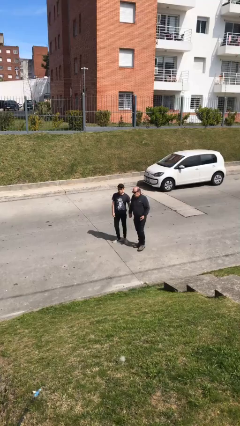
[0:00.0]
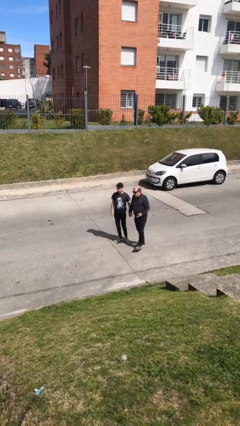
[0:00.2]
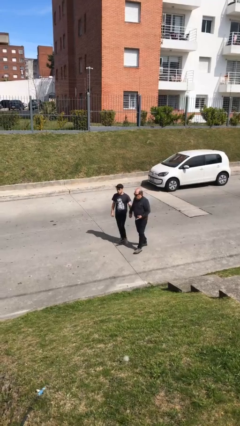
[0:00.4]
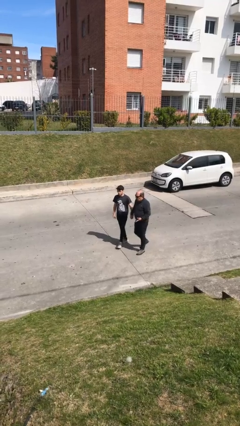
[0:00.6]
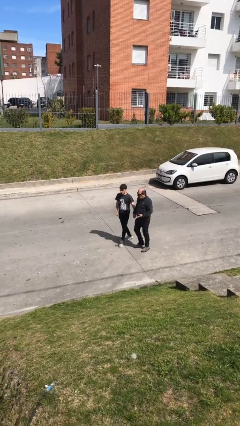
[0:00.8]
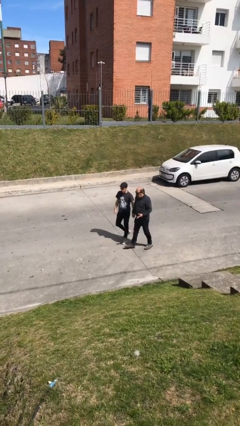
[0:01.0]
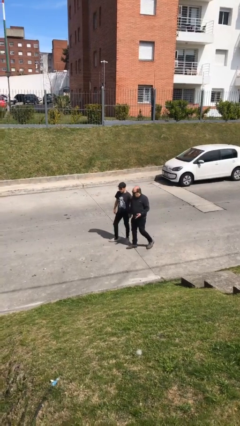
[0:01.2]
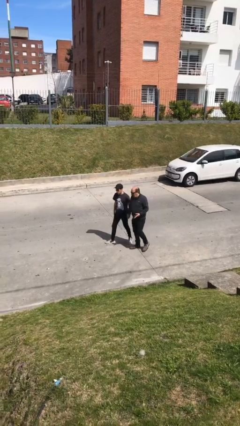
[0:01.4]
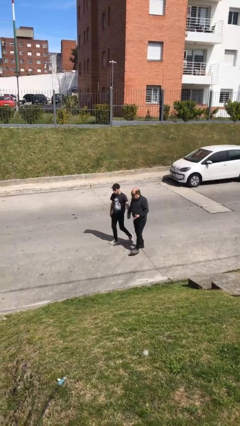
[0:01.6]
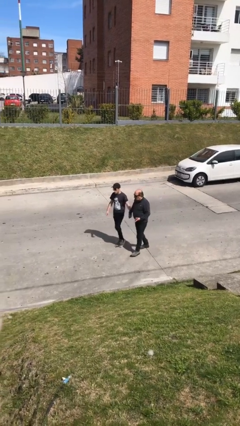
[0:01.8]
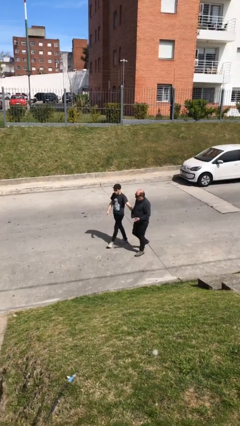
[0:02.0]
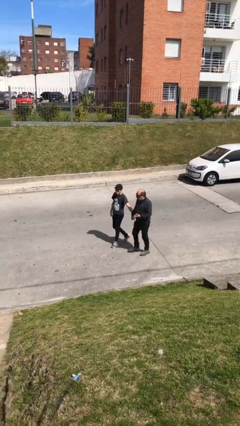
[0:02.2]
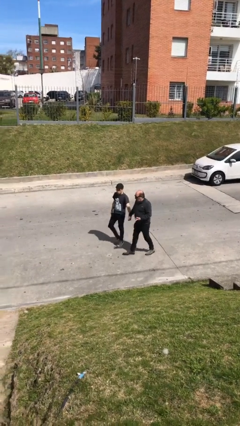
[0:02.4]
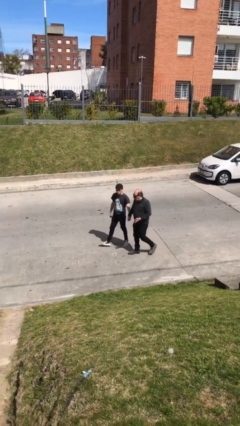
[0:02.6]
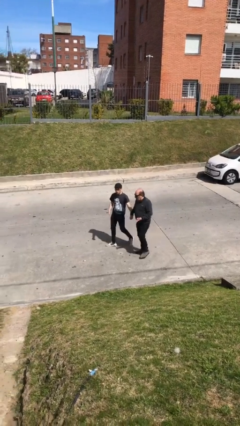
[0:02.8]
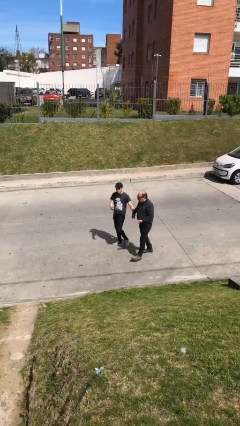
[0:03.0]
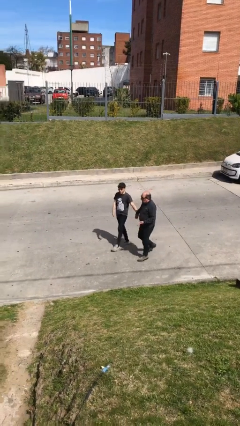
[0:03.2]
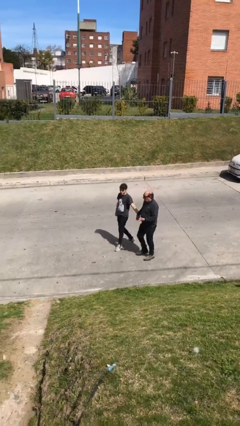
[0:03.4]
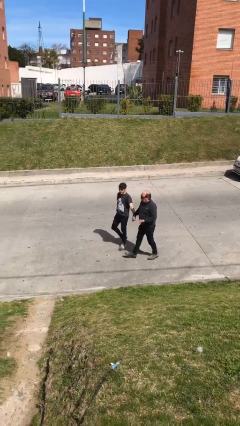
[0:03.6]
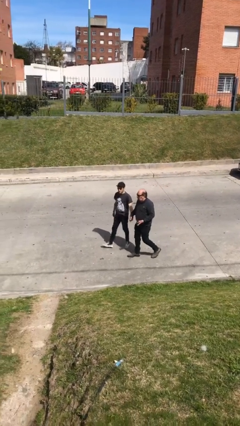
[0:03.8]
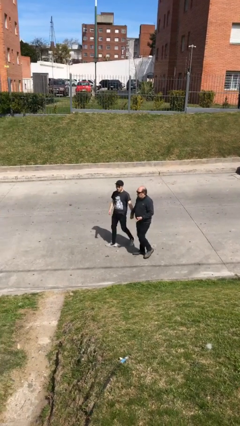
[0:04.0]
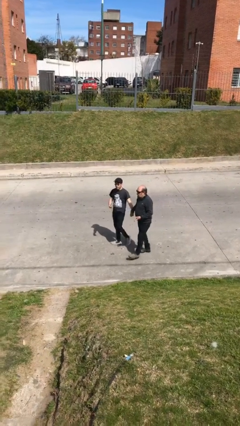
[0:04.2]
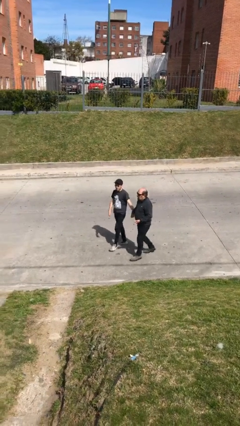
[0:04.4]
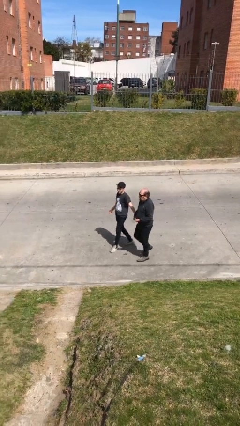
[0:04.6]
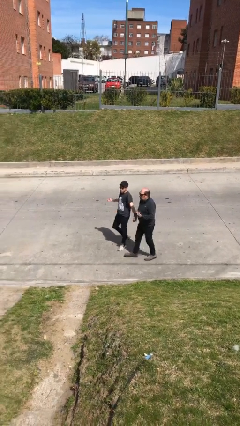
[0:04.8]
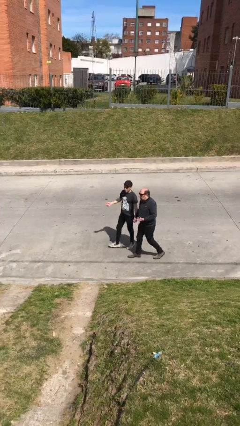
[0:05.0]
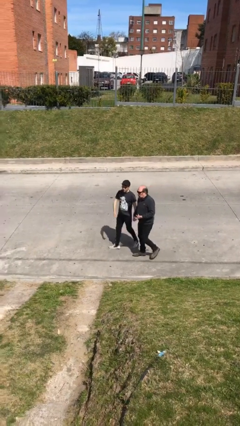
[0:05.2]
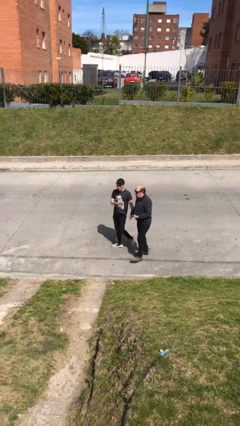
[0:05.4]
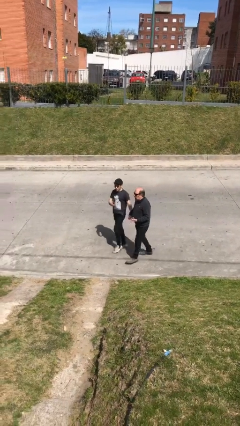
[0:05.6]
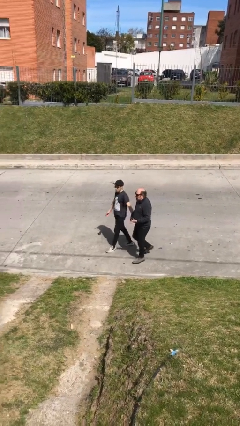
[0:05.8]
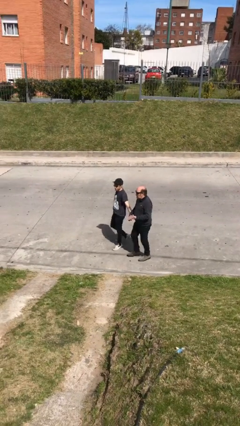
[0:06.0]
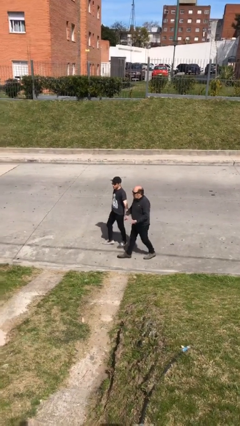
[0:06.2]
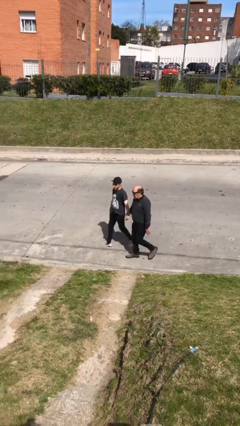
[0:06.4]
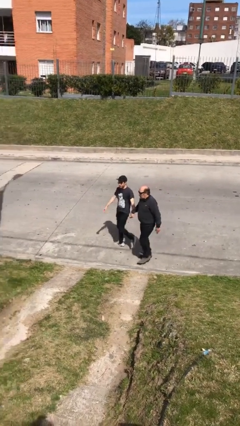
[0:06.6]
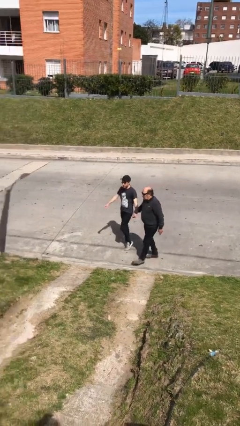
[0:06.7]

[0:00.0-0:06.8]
person holds hand

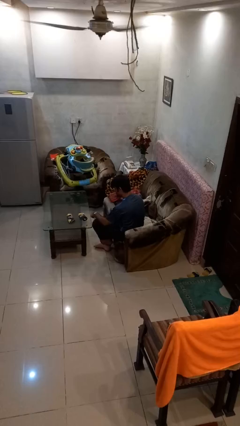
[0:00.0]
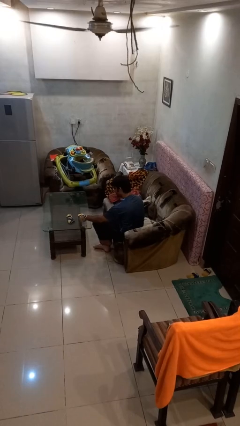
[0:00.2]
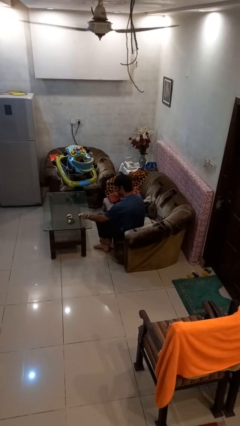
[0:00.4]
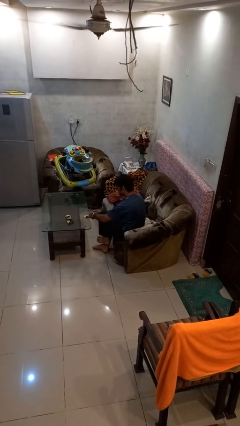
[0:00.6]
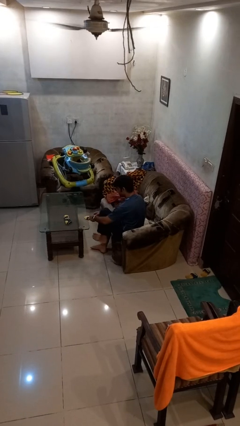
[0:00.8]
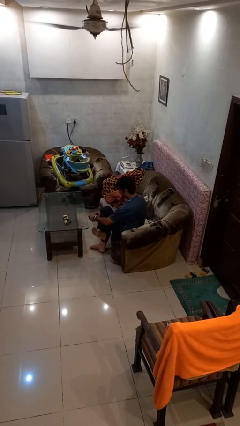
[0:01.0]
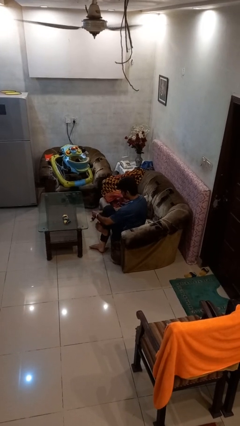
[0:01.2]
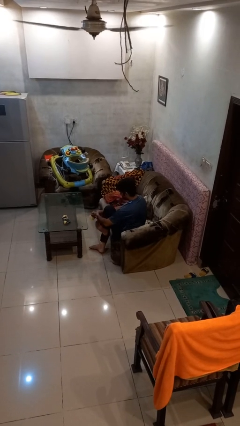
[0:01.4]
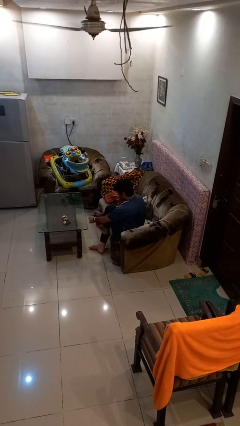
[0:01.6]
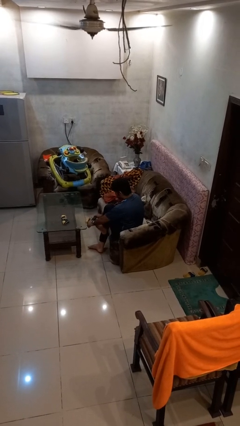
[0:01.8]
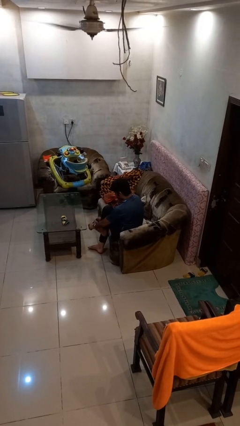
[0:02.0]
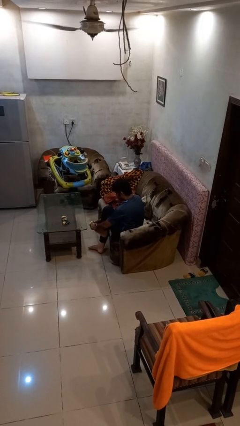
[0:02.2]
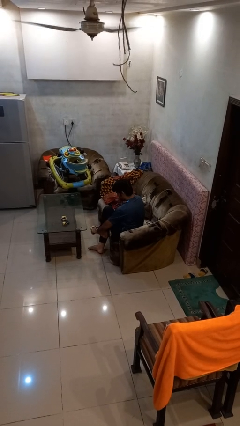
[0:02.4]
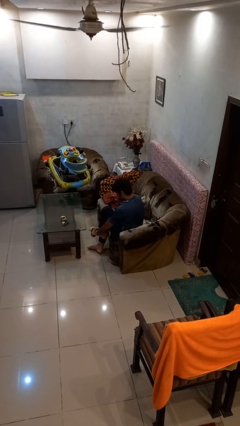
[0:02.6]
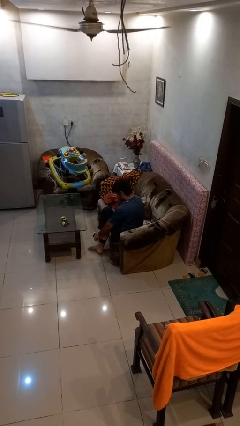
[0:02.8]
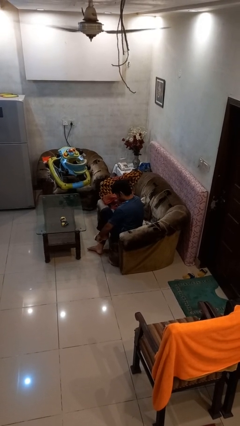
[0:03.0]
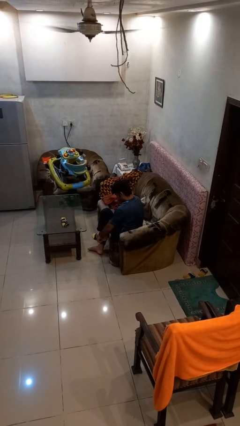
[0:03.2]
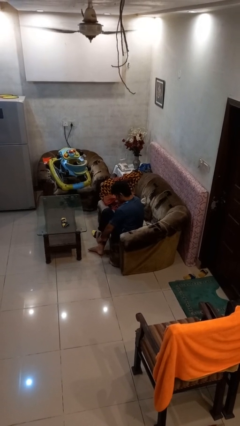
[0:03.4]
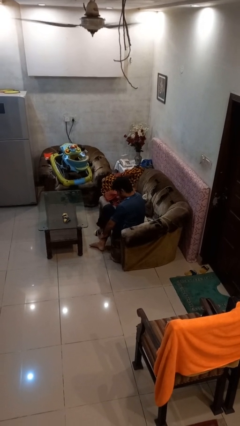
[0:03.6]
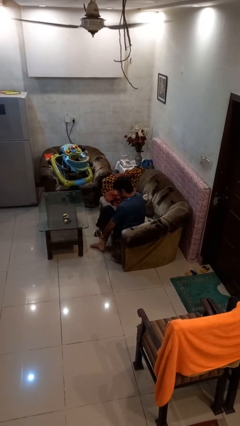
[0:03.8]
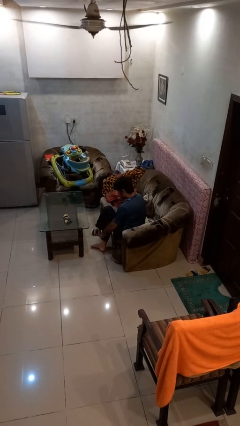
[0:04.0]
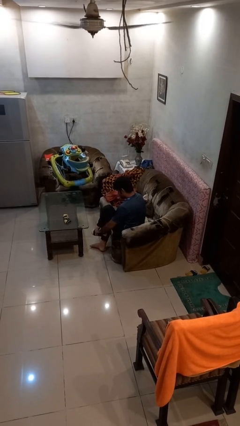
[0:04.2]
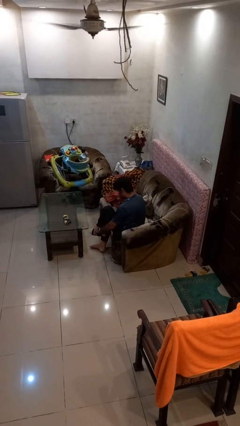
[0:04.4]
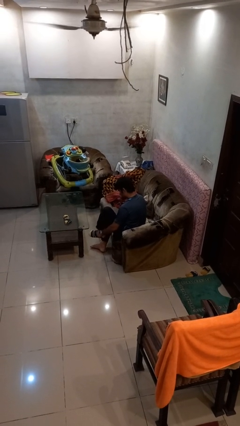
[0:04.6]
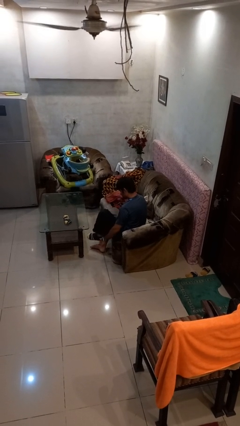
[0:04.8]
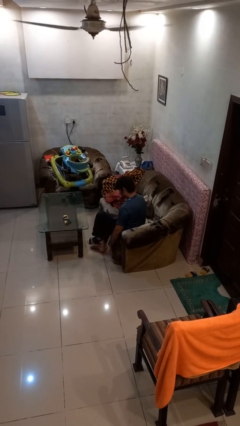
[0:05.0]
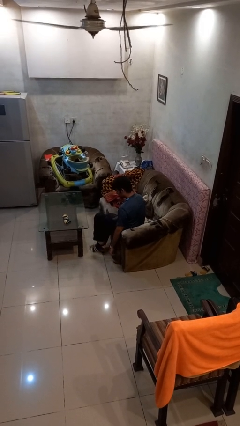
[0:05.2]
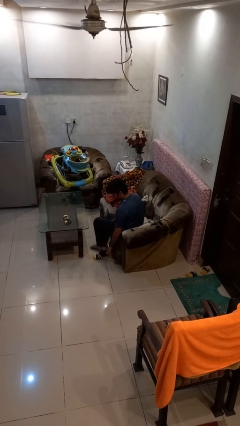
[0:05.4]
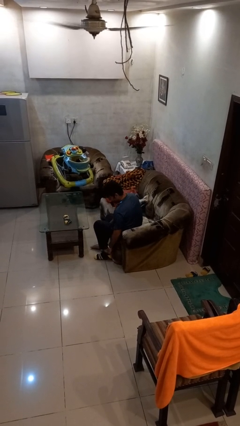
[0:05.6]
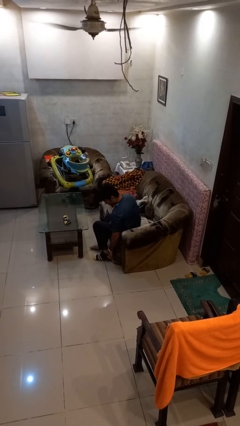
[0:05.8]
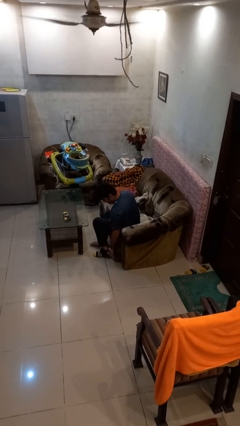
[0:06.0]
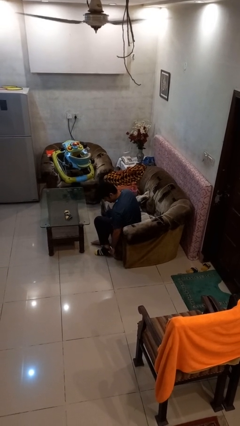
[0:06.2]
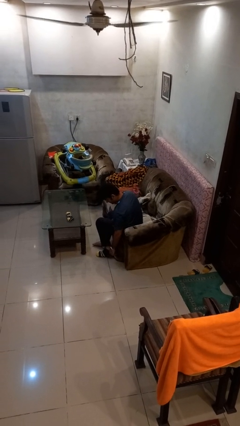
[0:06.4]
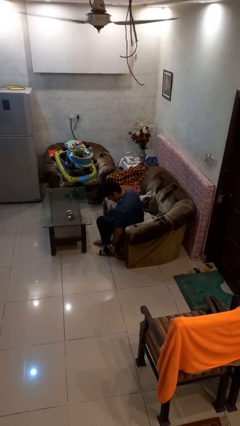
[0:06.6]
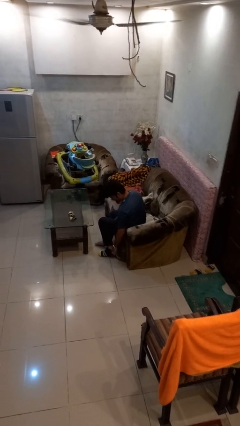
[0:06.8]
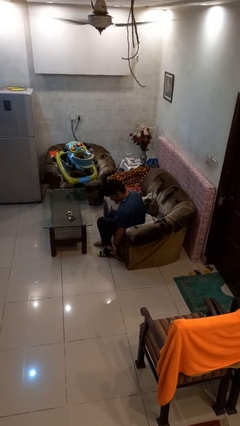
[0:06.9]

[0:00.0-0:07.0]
person puts on socks

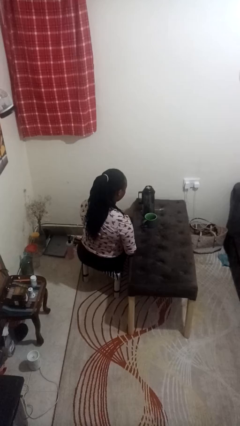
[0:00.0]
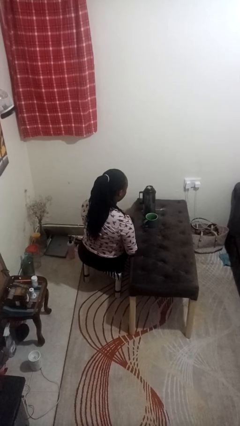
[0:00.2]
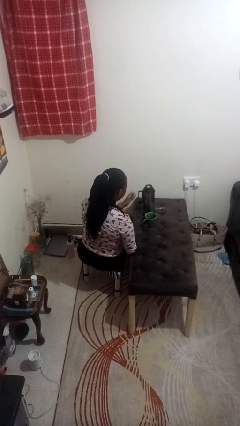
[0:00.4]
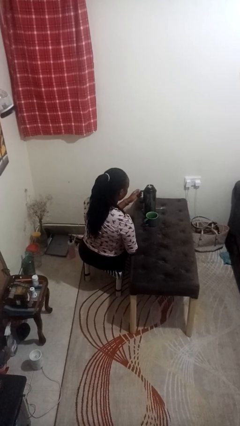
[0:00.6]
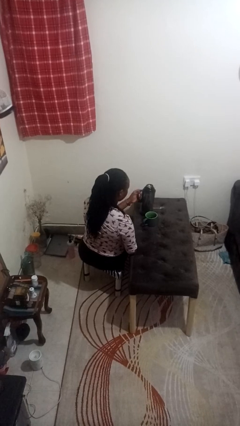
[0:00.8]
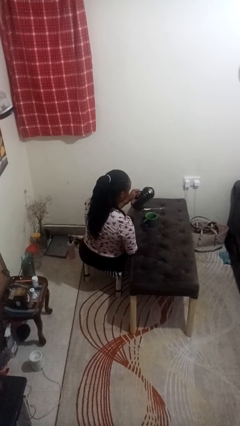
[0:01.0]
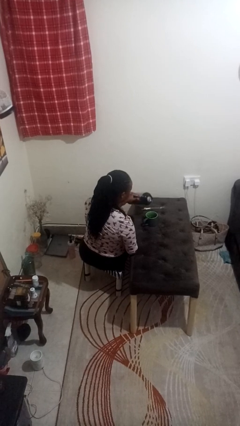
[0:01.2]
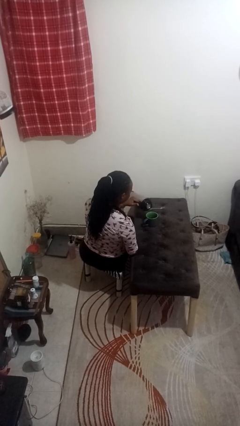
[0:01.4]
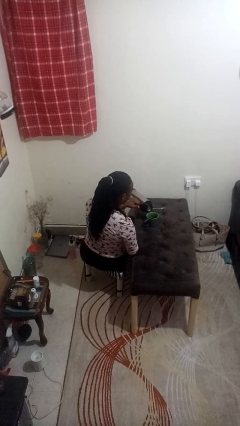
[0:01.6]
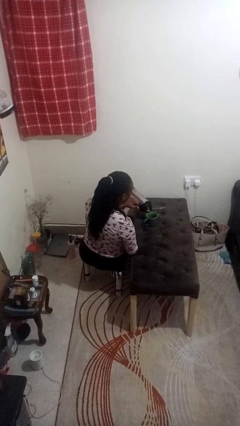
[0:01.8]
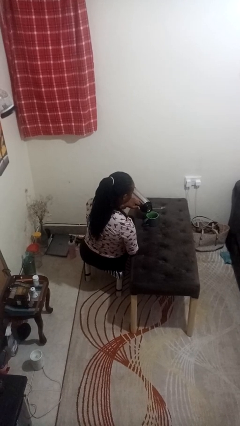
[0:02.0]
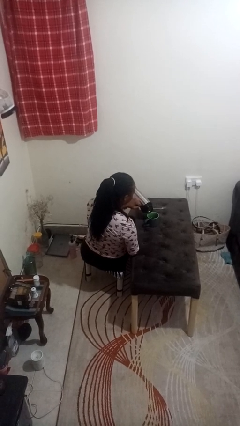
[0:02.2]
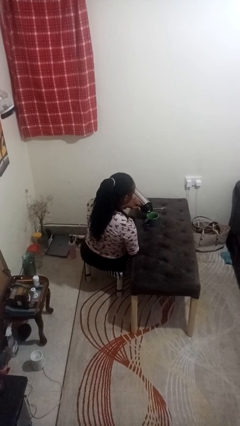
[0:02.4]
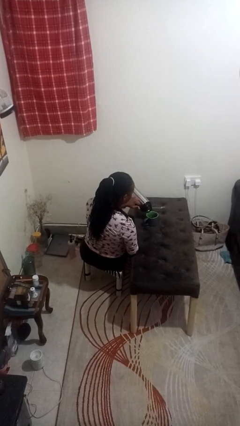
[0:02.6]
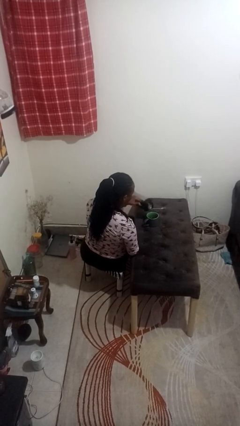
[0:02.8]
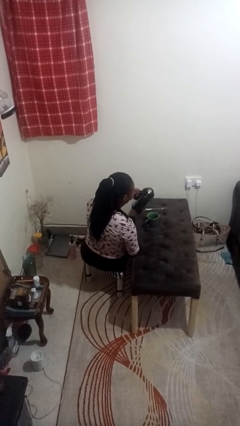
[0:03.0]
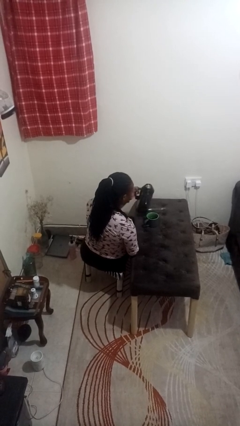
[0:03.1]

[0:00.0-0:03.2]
person pours coffee into mug

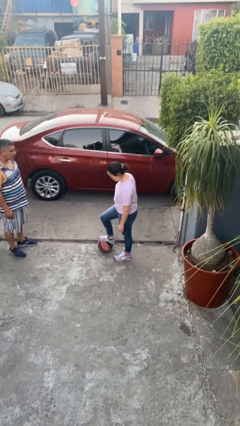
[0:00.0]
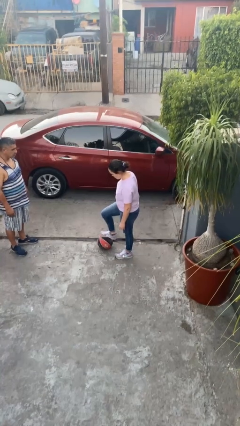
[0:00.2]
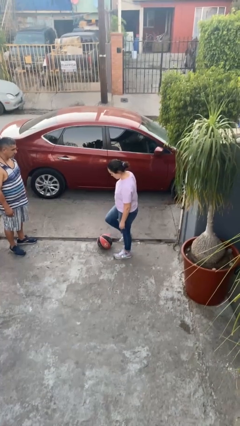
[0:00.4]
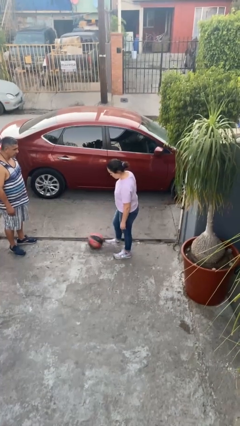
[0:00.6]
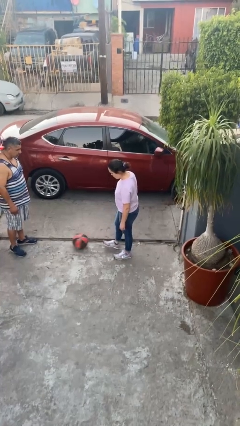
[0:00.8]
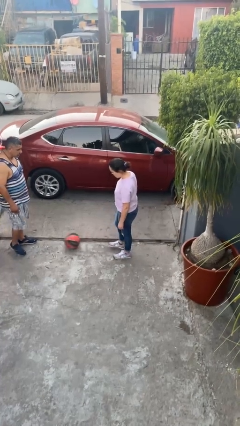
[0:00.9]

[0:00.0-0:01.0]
person kicks object to person

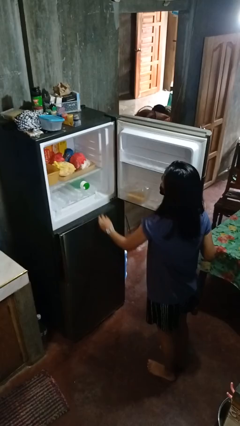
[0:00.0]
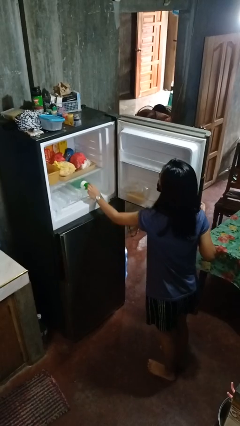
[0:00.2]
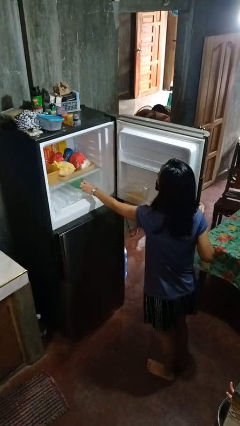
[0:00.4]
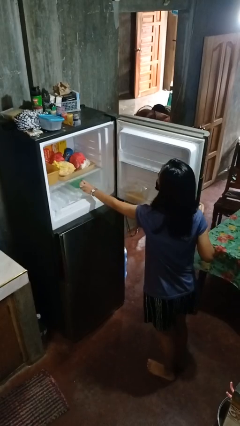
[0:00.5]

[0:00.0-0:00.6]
person takes object from refrigerator
